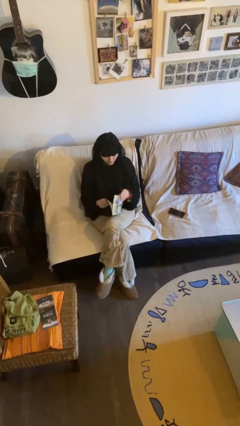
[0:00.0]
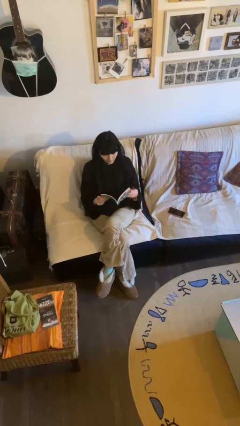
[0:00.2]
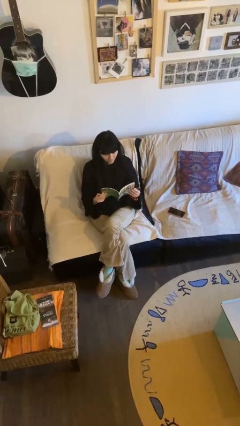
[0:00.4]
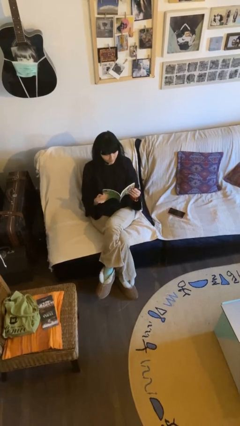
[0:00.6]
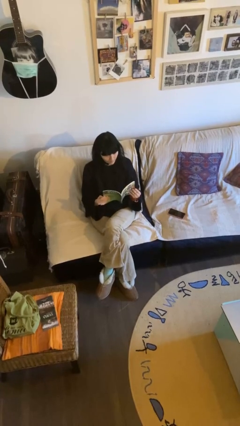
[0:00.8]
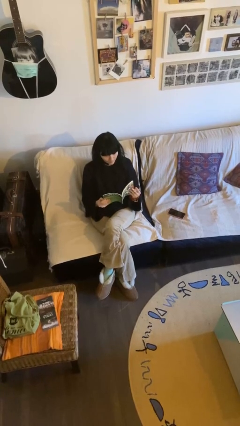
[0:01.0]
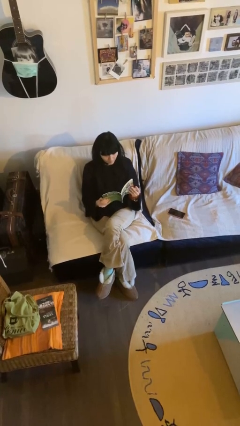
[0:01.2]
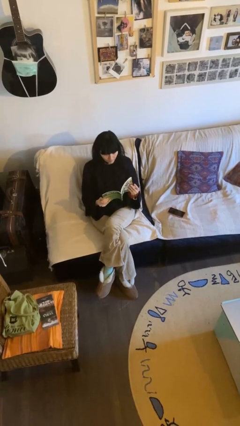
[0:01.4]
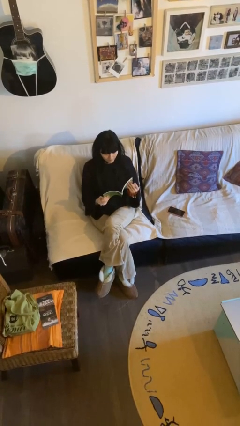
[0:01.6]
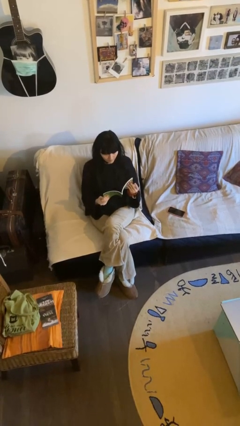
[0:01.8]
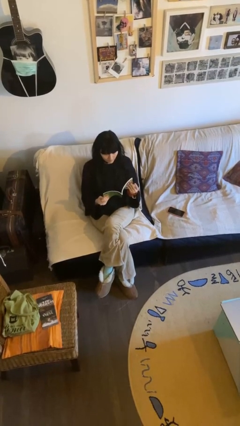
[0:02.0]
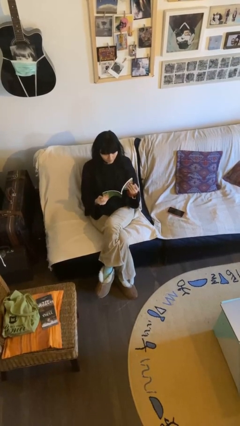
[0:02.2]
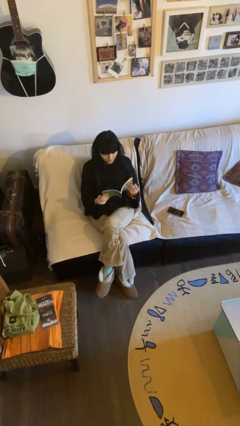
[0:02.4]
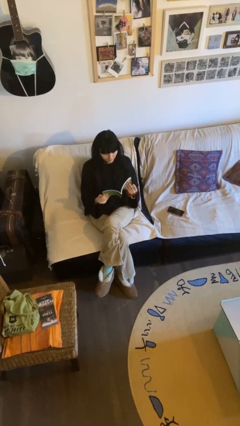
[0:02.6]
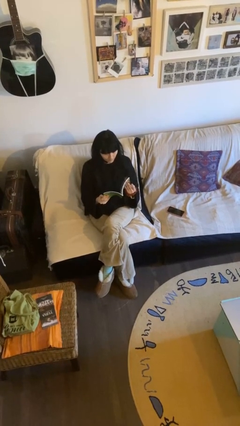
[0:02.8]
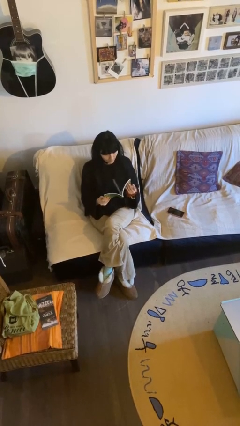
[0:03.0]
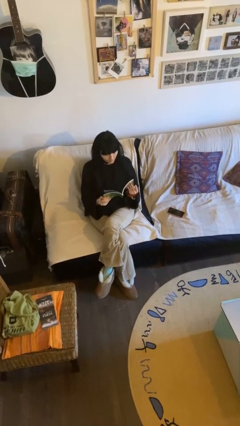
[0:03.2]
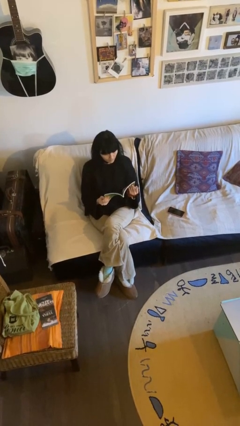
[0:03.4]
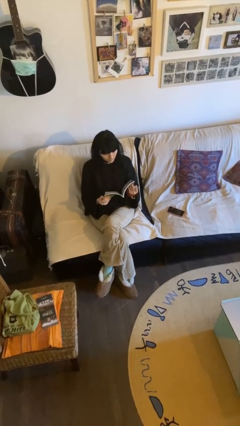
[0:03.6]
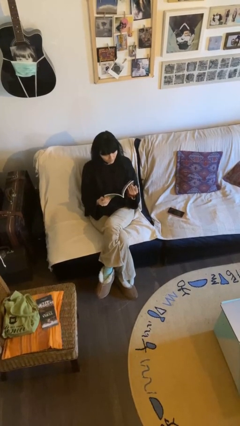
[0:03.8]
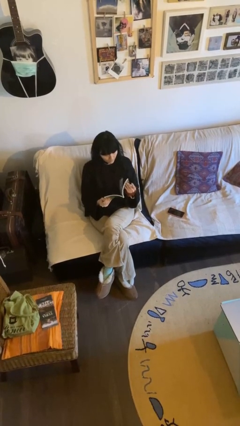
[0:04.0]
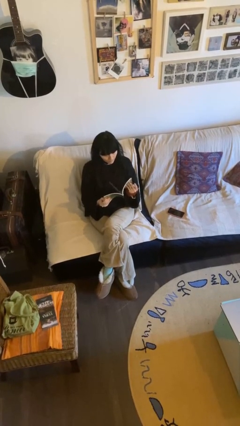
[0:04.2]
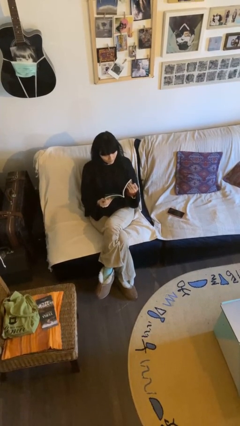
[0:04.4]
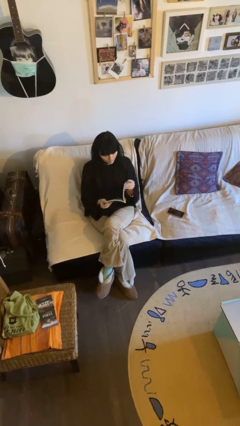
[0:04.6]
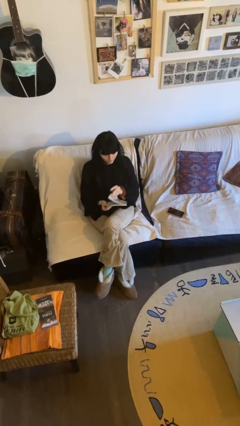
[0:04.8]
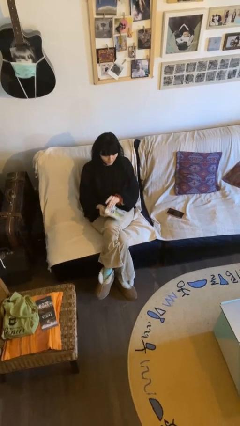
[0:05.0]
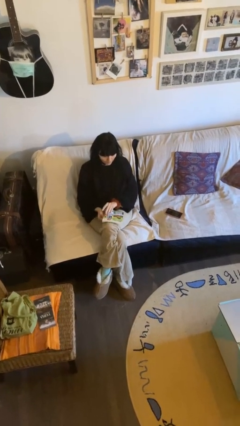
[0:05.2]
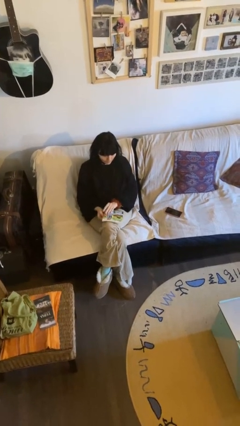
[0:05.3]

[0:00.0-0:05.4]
person reads document

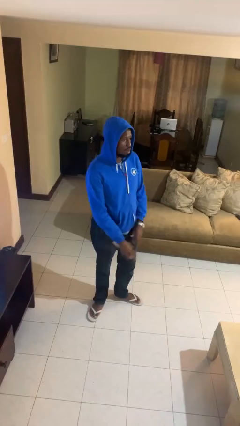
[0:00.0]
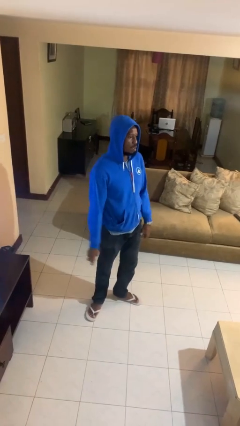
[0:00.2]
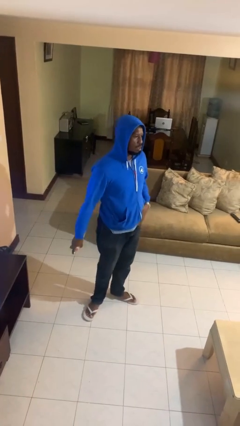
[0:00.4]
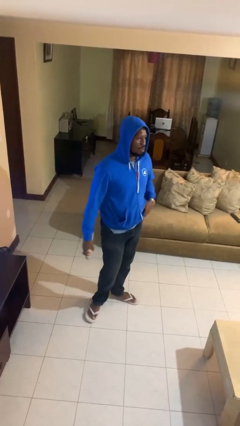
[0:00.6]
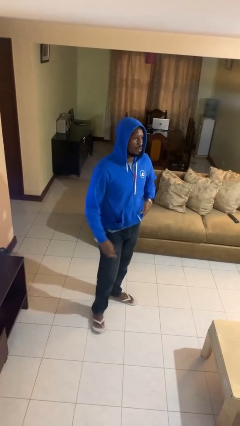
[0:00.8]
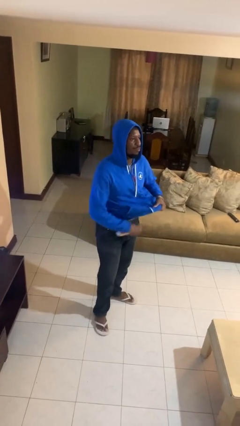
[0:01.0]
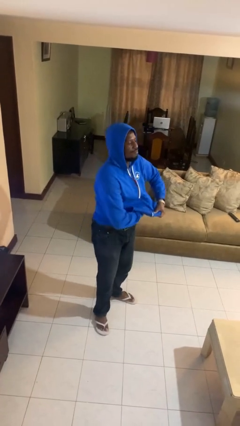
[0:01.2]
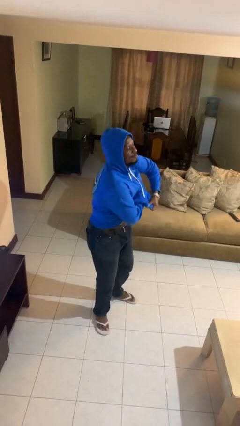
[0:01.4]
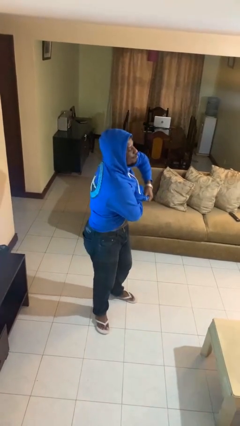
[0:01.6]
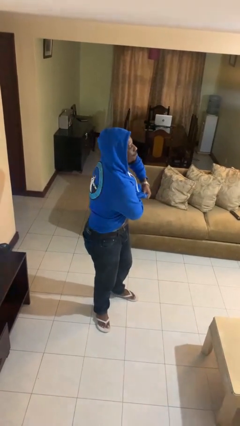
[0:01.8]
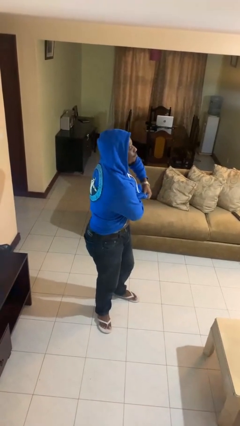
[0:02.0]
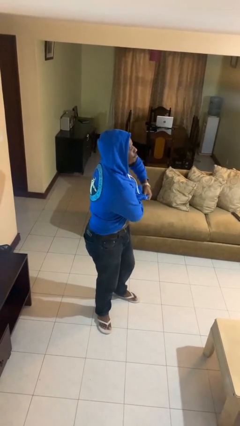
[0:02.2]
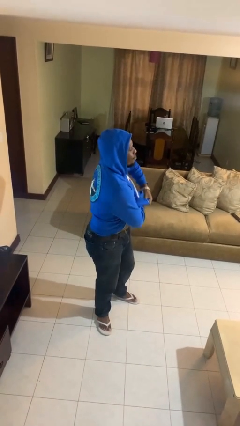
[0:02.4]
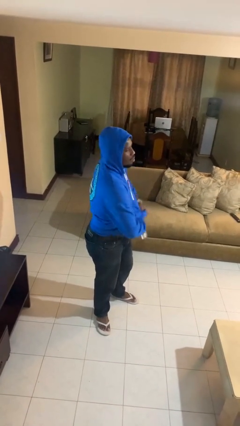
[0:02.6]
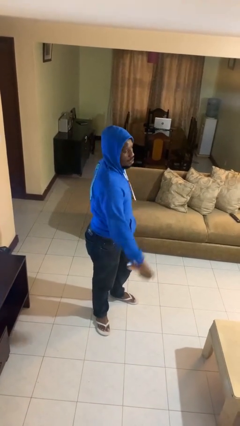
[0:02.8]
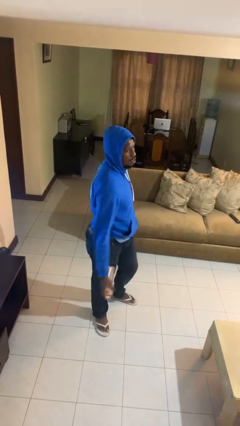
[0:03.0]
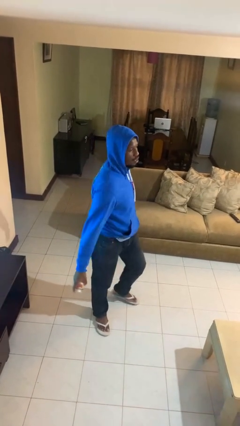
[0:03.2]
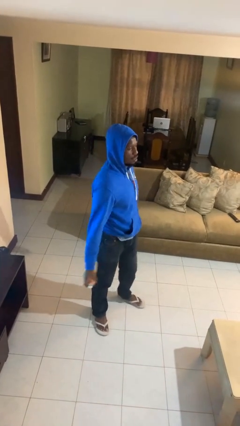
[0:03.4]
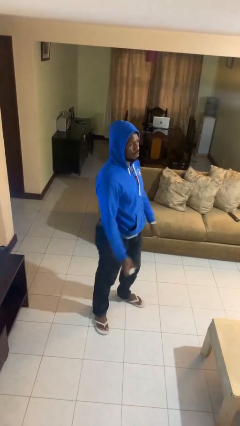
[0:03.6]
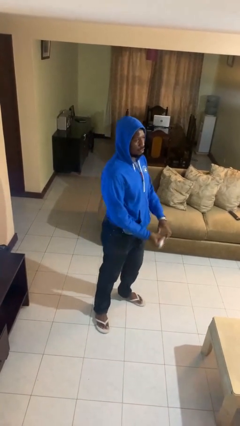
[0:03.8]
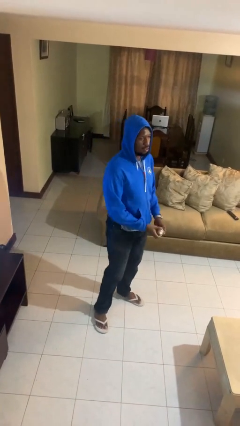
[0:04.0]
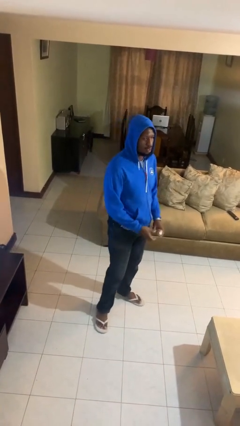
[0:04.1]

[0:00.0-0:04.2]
person applies deodorant

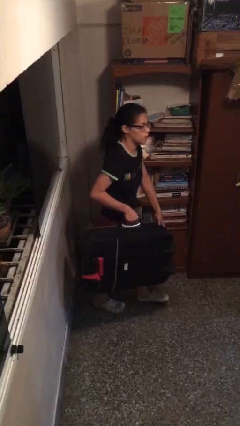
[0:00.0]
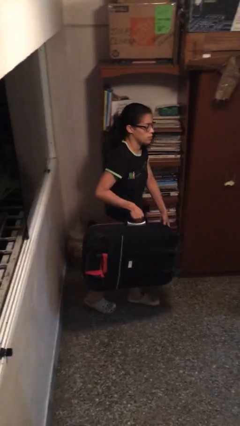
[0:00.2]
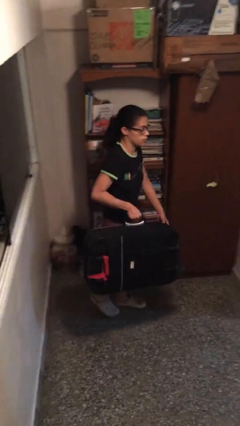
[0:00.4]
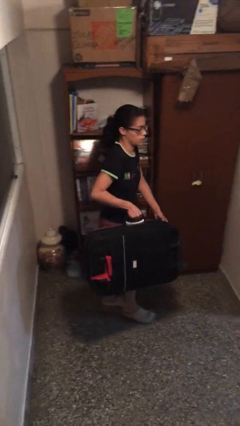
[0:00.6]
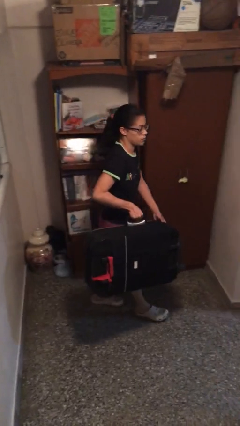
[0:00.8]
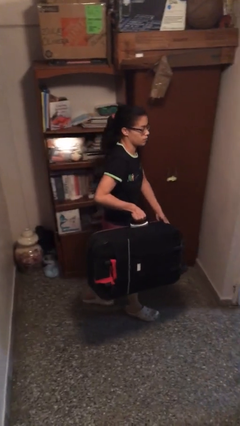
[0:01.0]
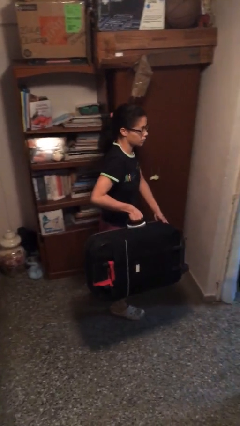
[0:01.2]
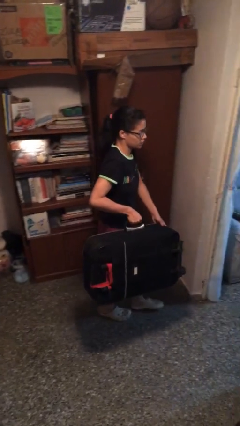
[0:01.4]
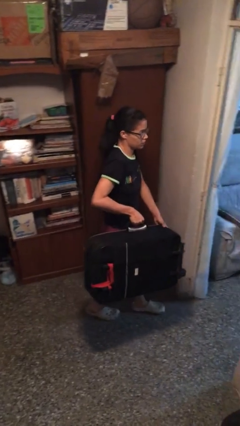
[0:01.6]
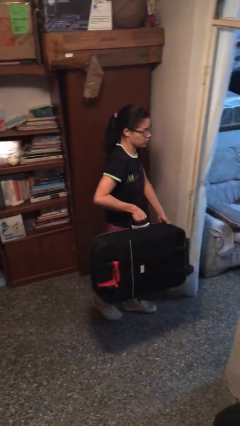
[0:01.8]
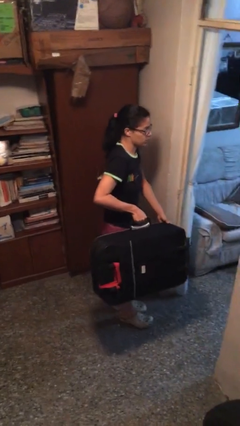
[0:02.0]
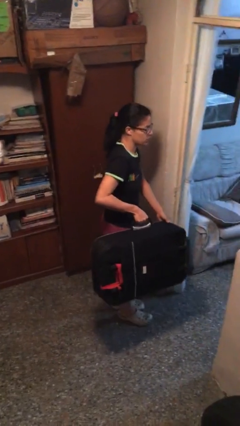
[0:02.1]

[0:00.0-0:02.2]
person carries heavy object

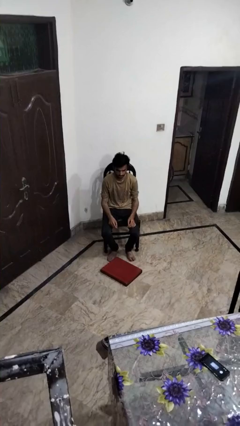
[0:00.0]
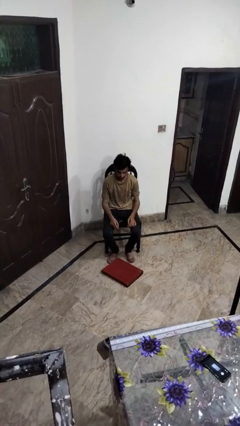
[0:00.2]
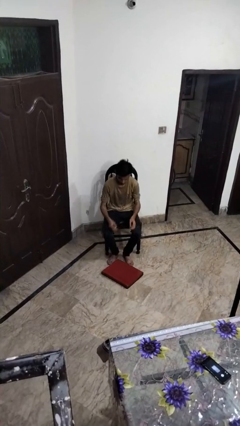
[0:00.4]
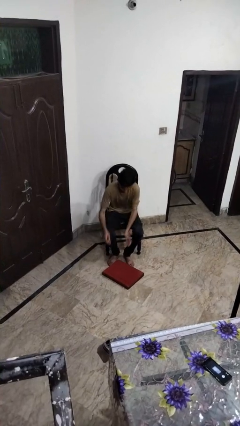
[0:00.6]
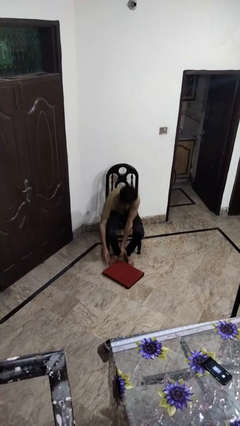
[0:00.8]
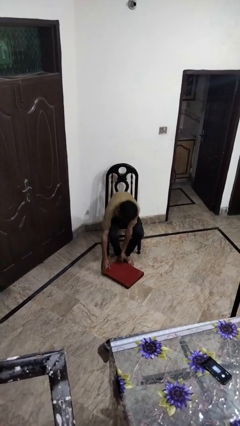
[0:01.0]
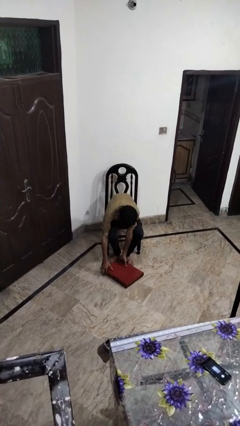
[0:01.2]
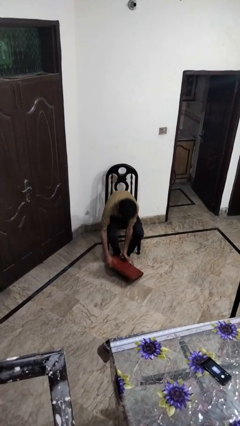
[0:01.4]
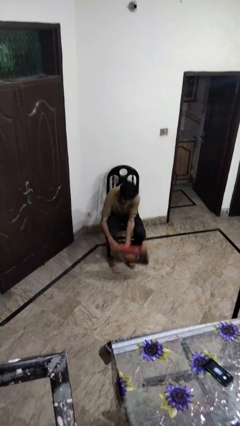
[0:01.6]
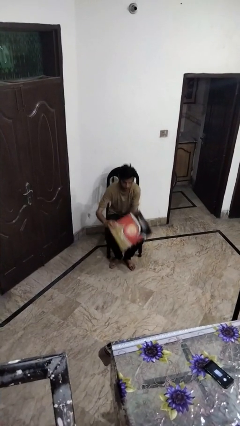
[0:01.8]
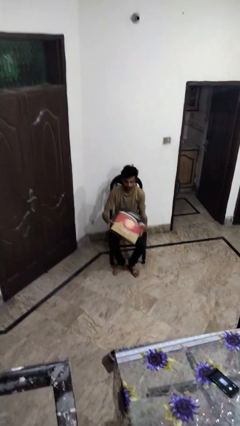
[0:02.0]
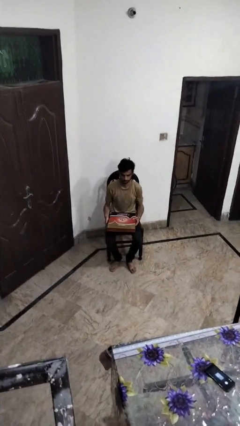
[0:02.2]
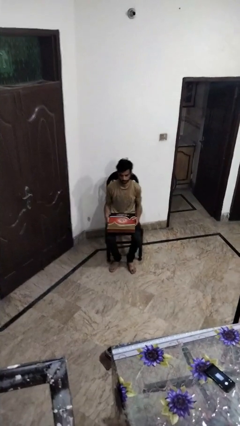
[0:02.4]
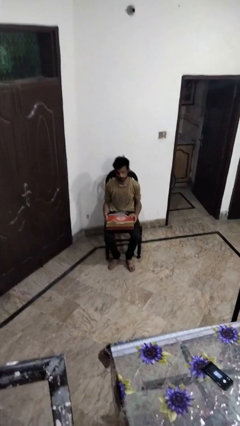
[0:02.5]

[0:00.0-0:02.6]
person picks up object from floor

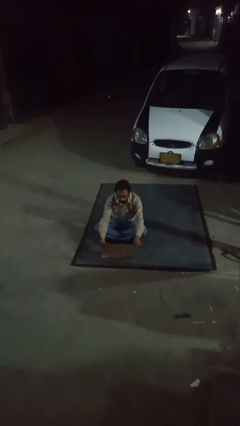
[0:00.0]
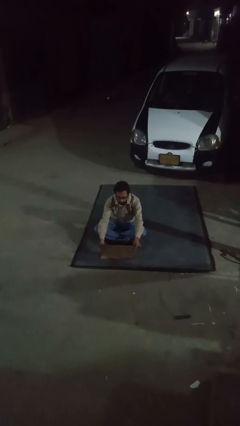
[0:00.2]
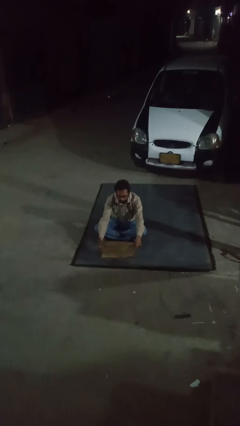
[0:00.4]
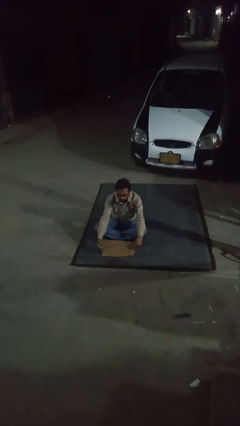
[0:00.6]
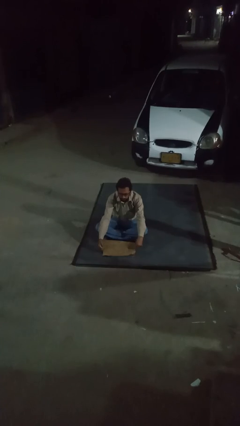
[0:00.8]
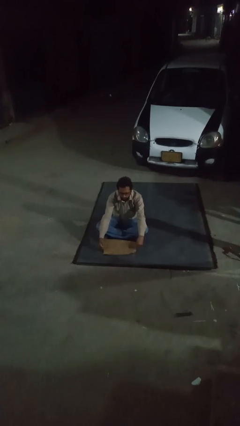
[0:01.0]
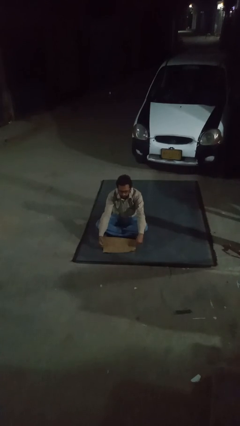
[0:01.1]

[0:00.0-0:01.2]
person closes laptop

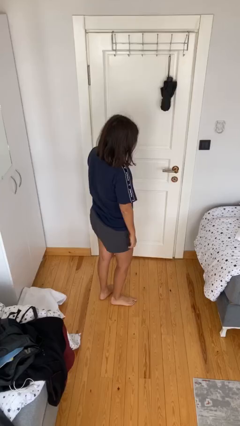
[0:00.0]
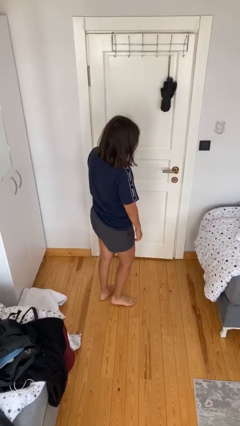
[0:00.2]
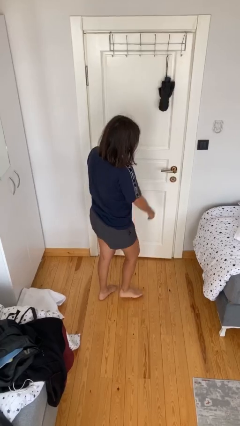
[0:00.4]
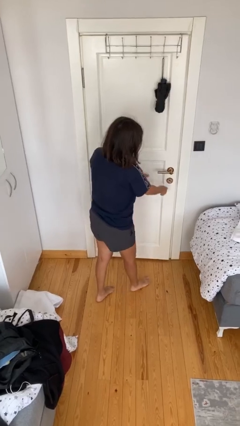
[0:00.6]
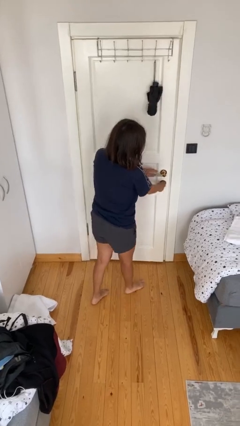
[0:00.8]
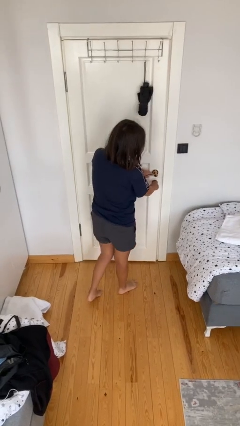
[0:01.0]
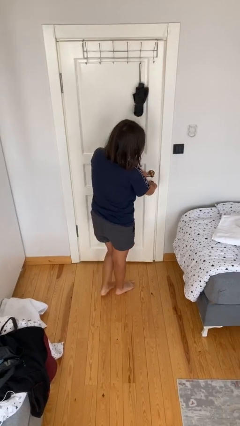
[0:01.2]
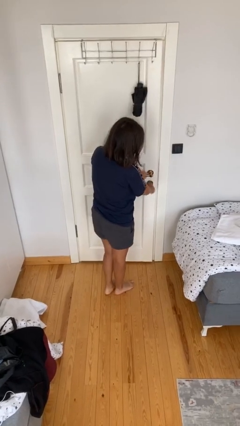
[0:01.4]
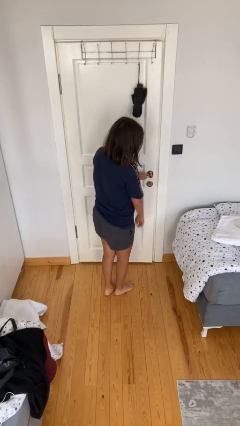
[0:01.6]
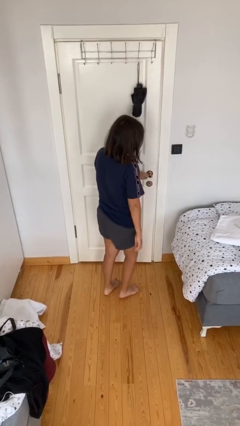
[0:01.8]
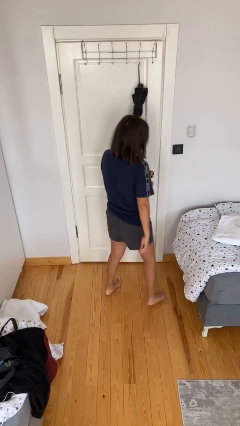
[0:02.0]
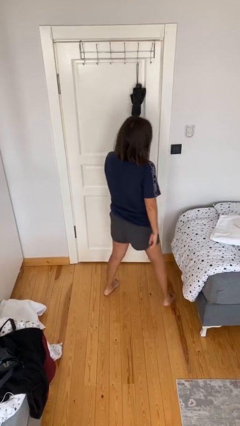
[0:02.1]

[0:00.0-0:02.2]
person unlocks door with keys
